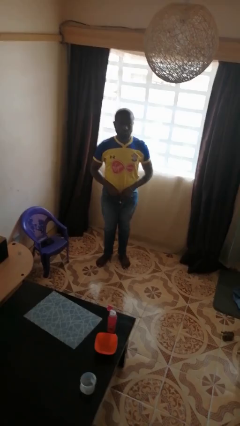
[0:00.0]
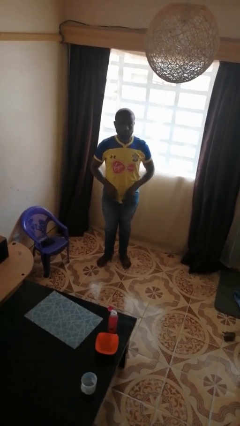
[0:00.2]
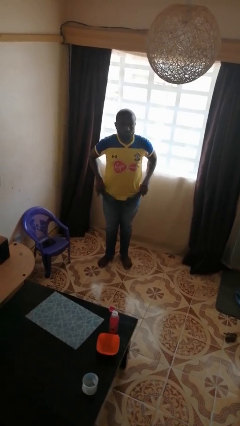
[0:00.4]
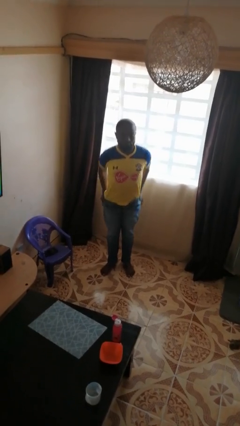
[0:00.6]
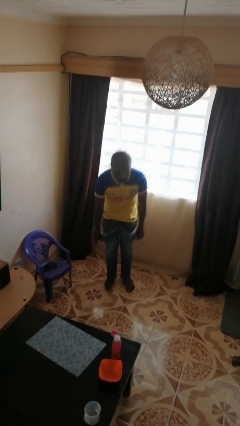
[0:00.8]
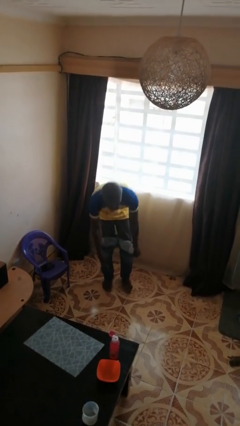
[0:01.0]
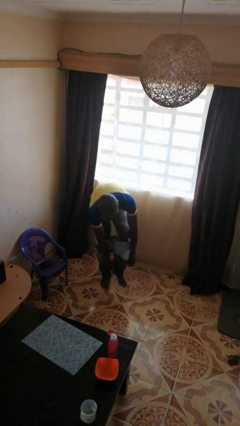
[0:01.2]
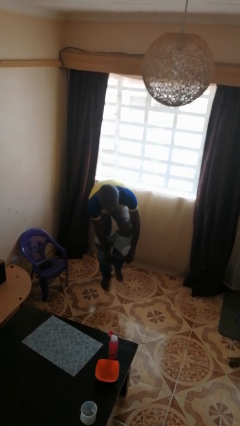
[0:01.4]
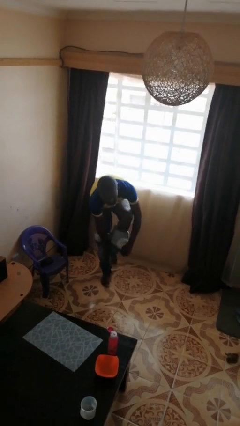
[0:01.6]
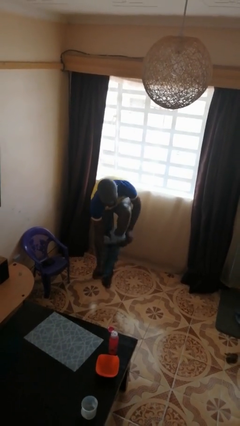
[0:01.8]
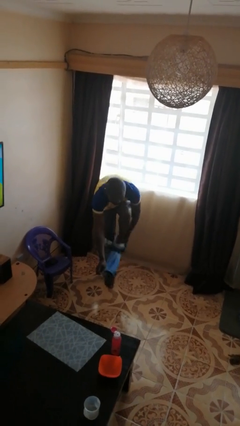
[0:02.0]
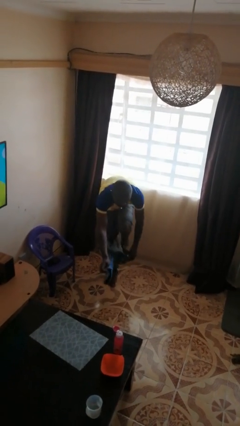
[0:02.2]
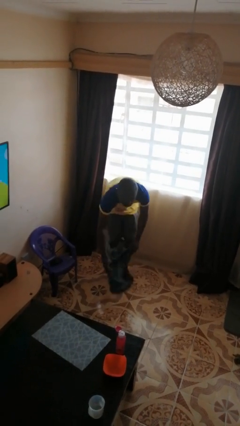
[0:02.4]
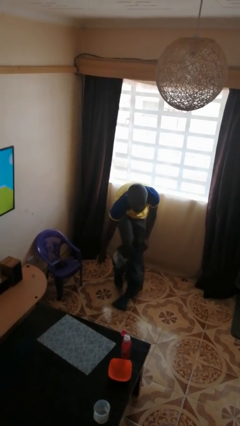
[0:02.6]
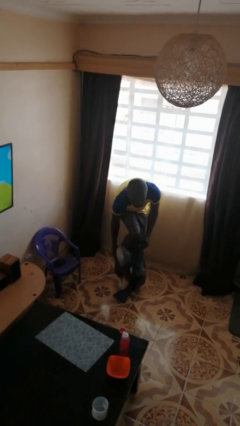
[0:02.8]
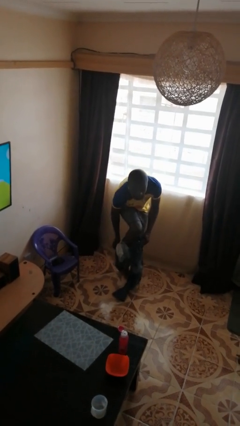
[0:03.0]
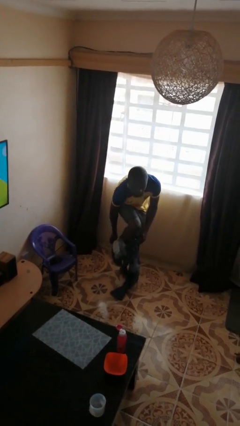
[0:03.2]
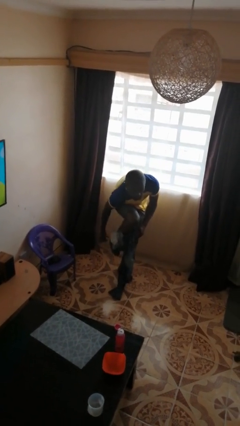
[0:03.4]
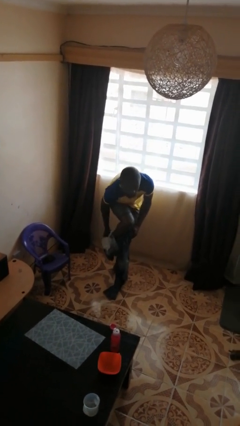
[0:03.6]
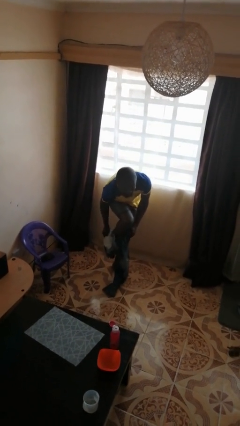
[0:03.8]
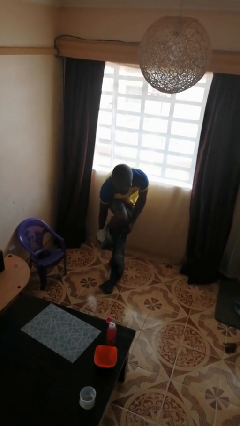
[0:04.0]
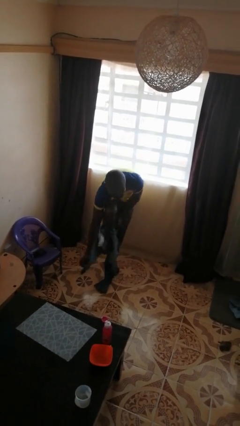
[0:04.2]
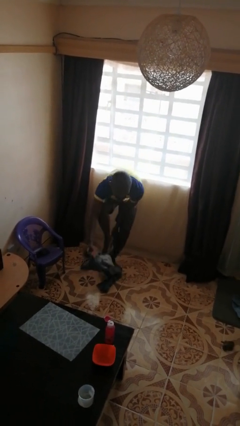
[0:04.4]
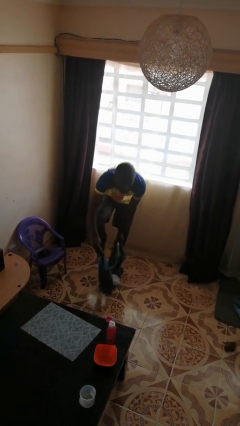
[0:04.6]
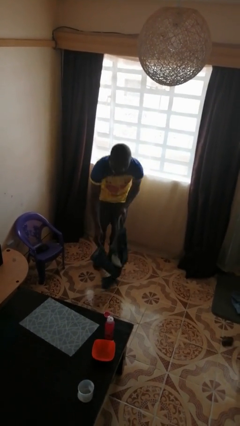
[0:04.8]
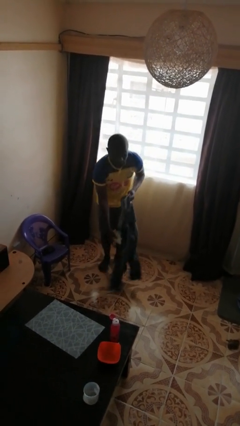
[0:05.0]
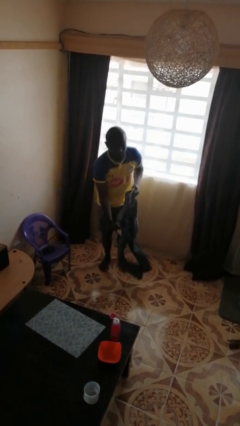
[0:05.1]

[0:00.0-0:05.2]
person takes off pants

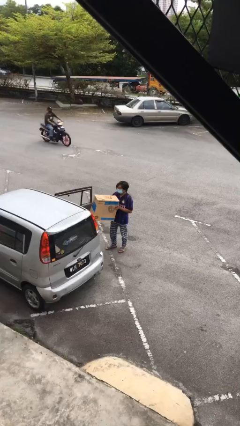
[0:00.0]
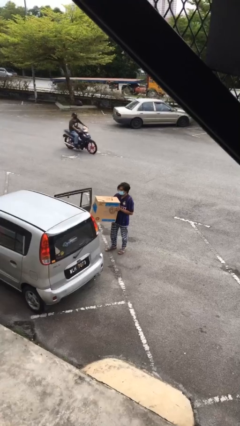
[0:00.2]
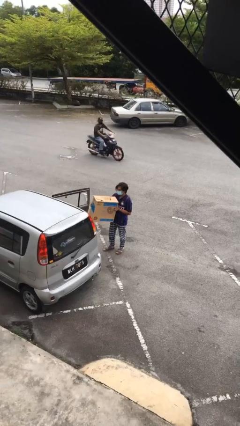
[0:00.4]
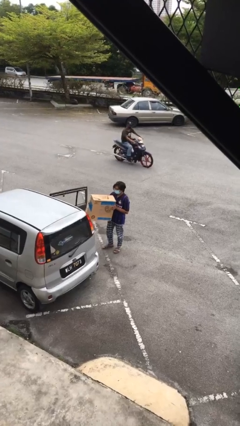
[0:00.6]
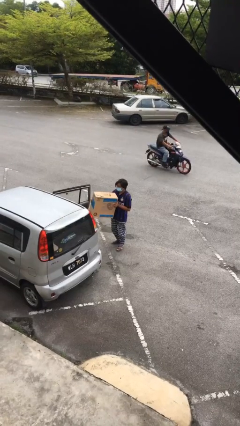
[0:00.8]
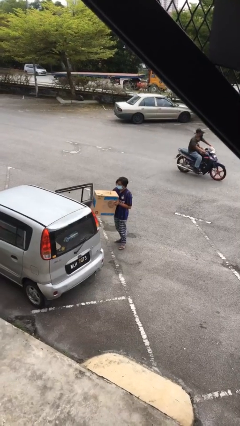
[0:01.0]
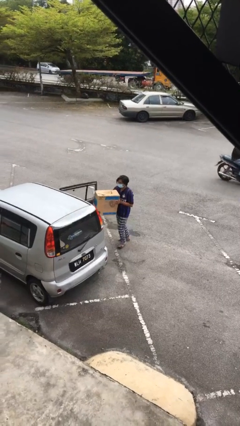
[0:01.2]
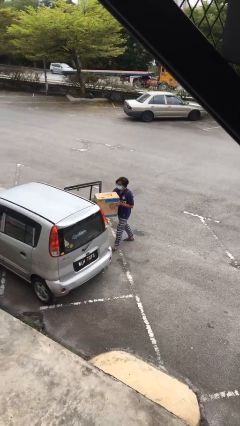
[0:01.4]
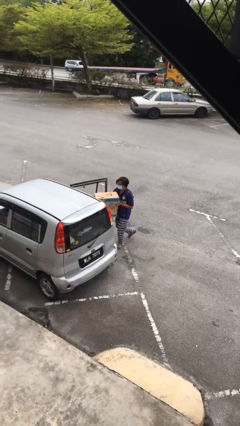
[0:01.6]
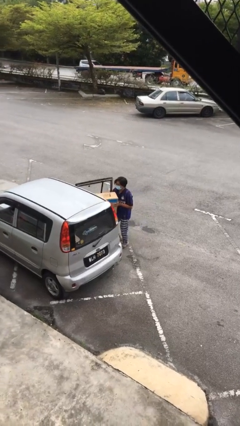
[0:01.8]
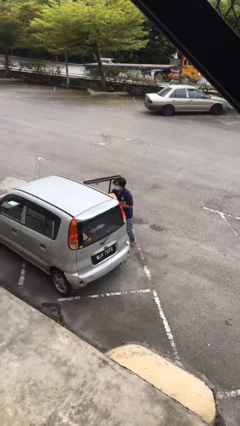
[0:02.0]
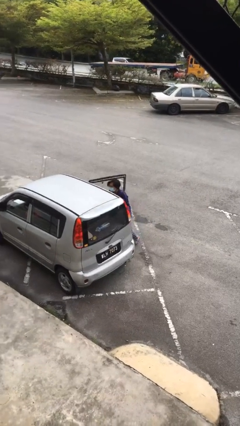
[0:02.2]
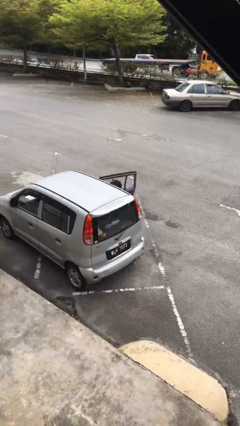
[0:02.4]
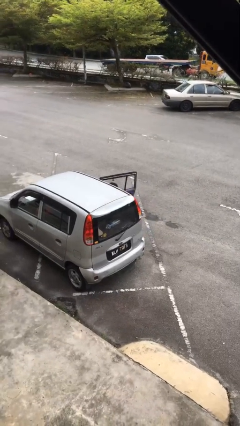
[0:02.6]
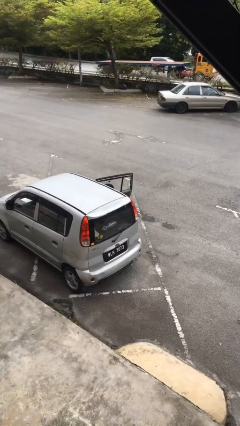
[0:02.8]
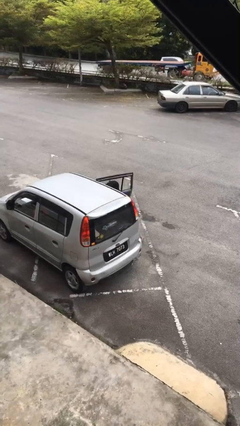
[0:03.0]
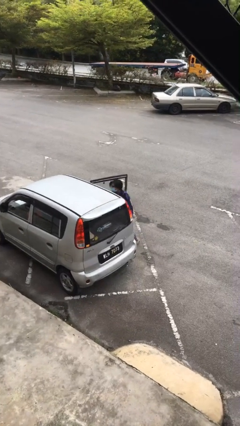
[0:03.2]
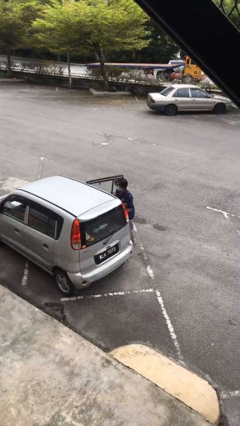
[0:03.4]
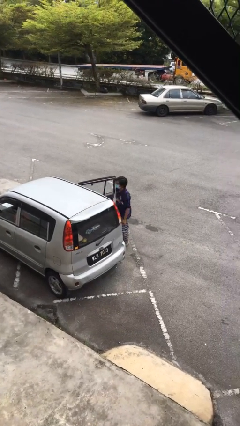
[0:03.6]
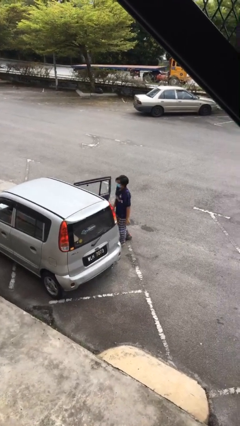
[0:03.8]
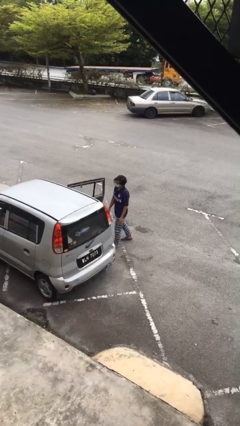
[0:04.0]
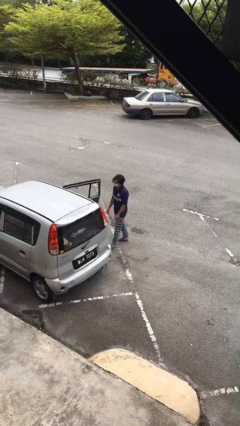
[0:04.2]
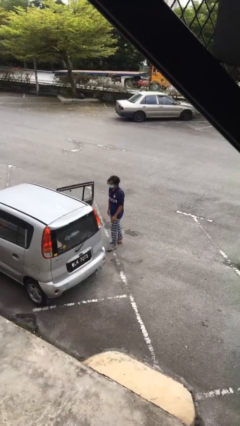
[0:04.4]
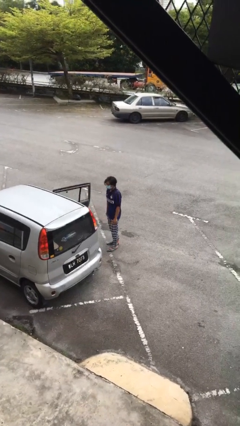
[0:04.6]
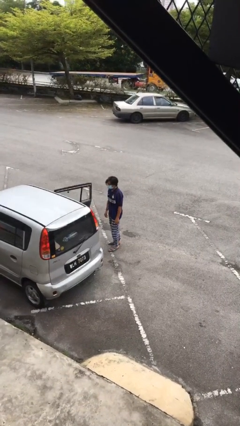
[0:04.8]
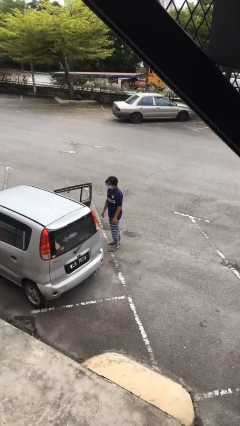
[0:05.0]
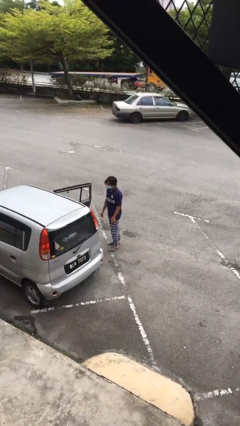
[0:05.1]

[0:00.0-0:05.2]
person loads car

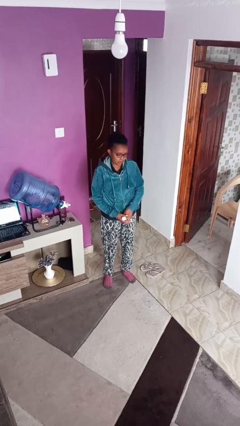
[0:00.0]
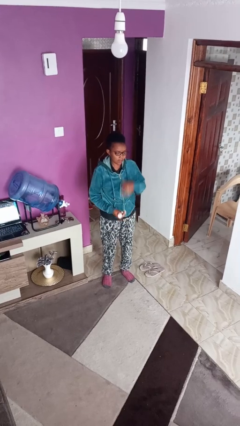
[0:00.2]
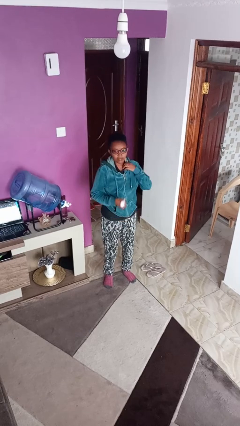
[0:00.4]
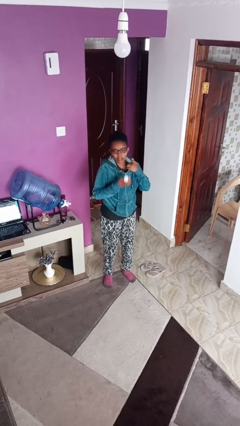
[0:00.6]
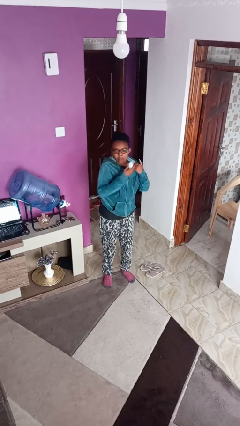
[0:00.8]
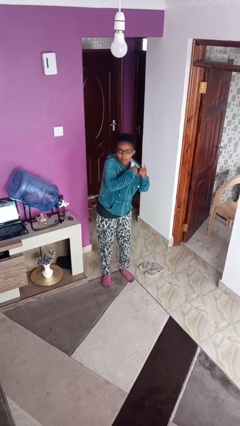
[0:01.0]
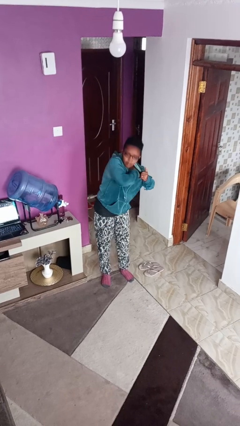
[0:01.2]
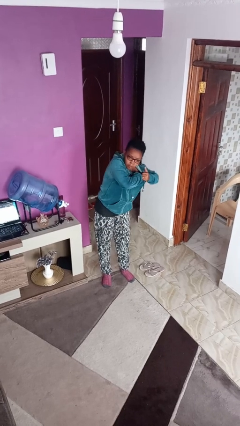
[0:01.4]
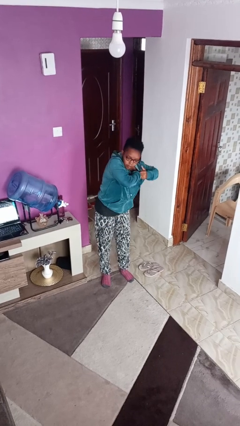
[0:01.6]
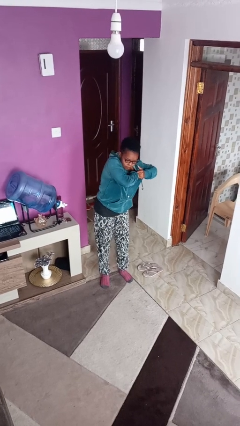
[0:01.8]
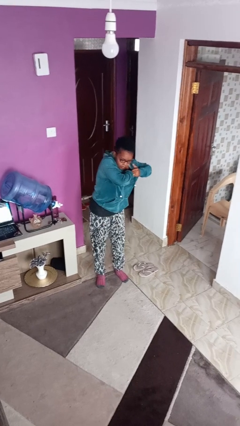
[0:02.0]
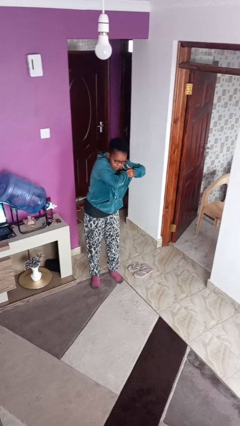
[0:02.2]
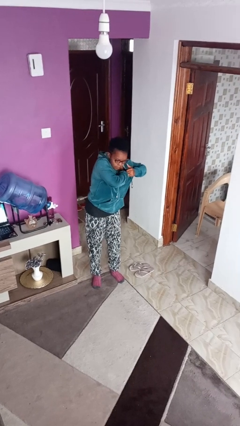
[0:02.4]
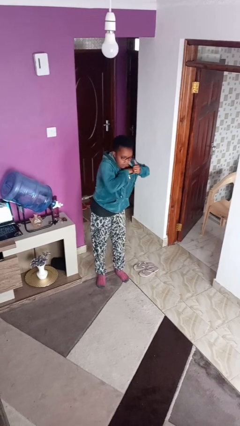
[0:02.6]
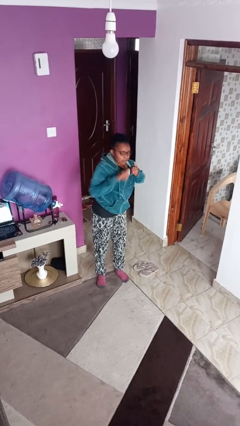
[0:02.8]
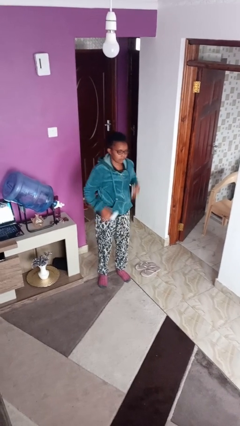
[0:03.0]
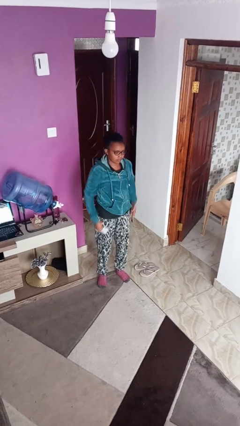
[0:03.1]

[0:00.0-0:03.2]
person applies deodorant

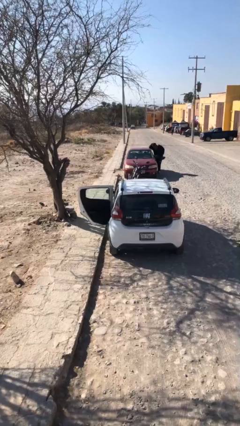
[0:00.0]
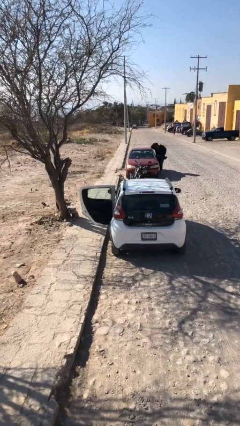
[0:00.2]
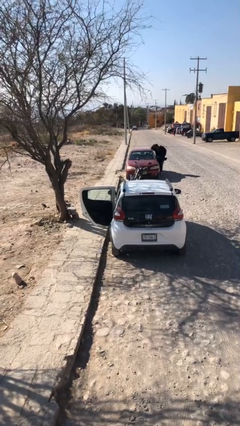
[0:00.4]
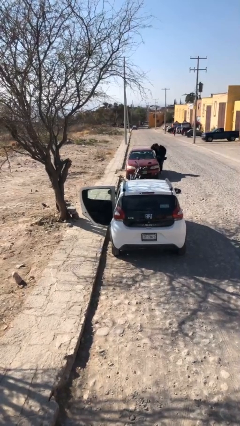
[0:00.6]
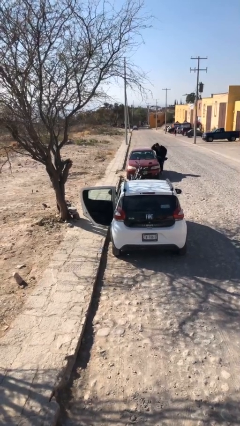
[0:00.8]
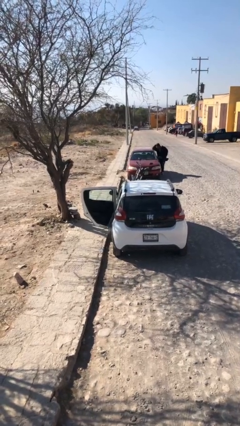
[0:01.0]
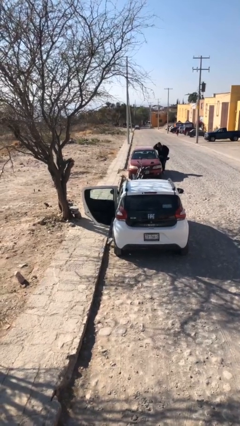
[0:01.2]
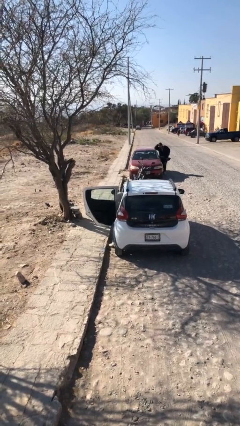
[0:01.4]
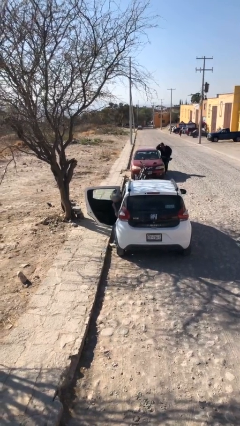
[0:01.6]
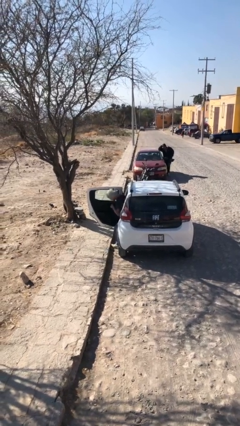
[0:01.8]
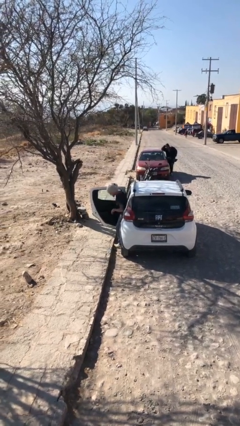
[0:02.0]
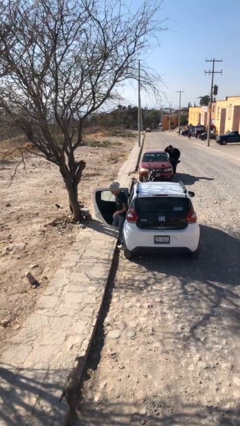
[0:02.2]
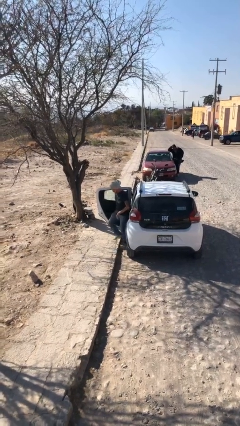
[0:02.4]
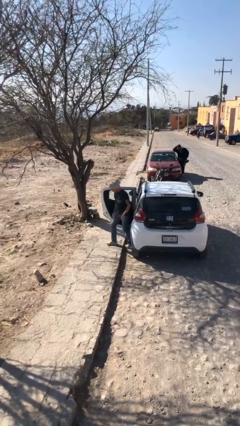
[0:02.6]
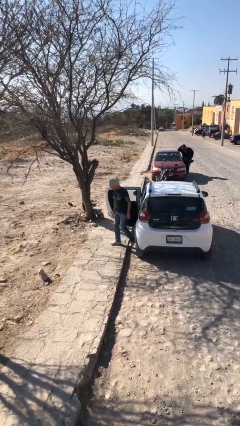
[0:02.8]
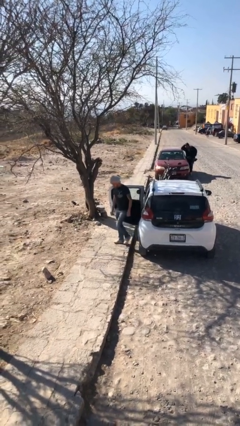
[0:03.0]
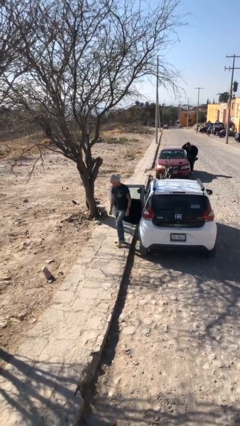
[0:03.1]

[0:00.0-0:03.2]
person exits car

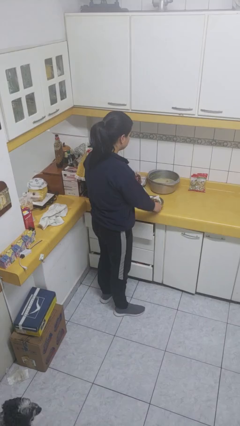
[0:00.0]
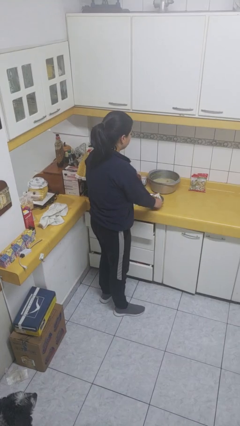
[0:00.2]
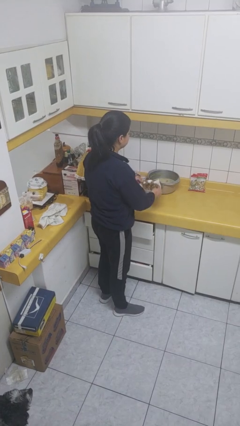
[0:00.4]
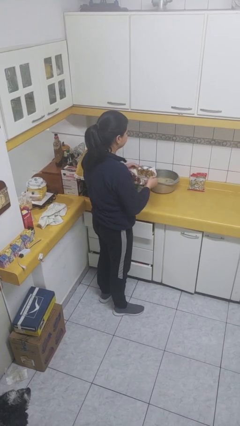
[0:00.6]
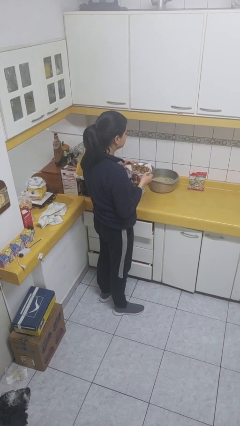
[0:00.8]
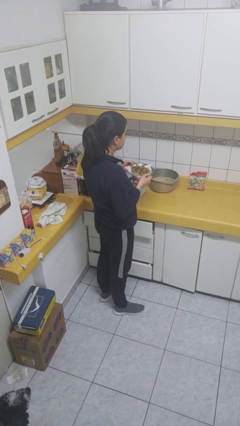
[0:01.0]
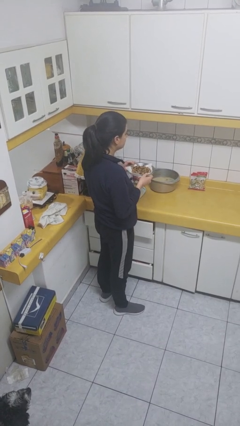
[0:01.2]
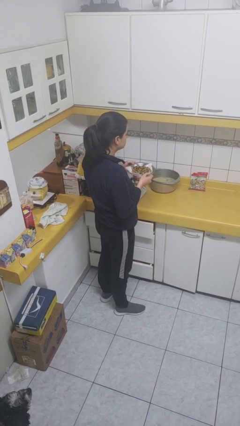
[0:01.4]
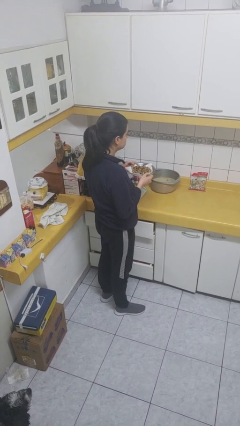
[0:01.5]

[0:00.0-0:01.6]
person picks up object from countertop
